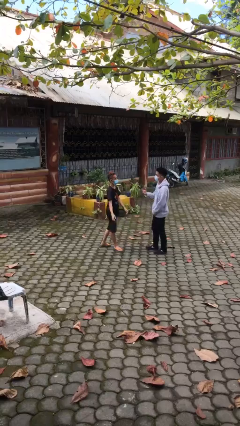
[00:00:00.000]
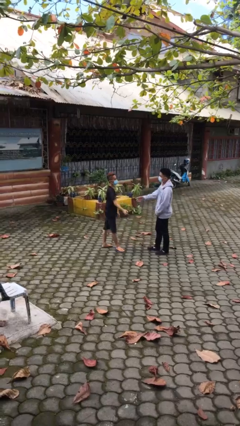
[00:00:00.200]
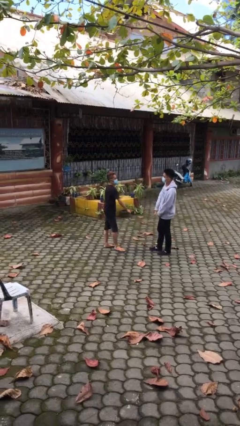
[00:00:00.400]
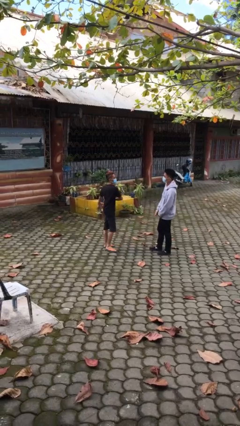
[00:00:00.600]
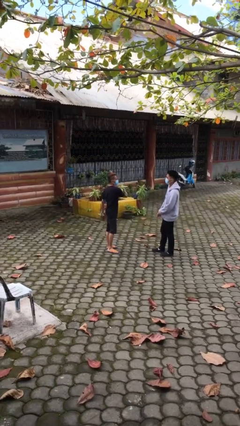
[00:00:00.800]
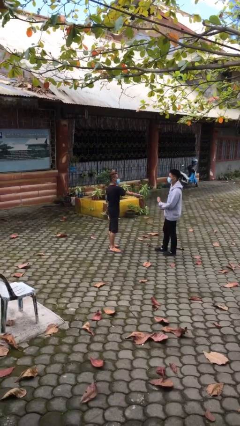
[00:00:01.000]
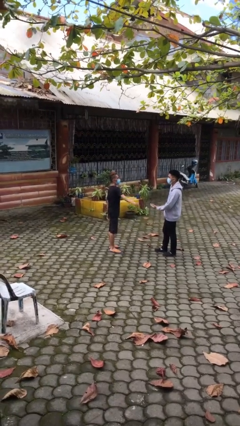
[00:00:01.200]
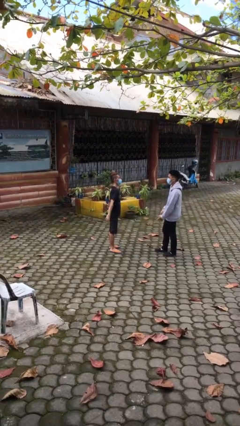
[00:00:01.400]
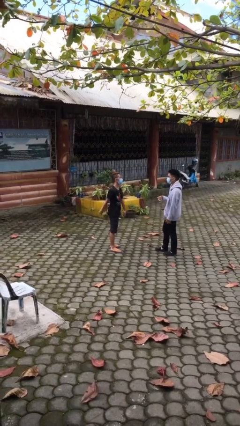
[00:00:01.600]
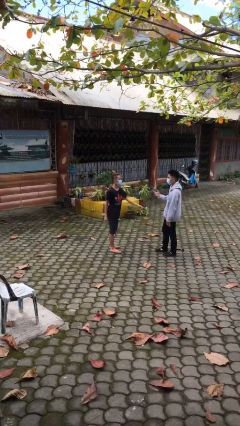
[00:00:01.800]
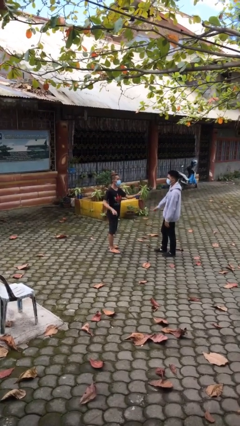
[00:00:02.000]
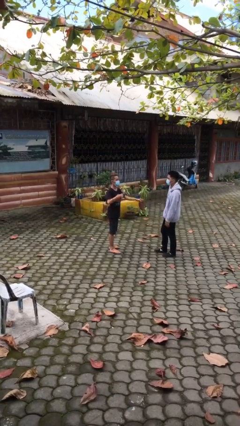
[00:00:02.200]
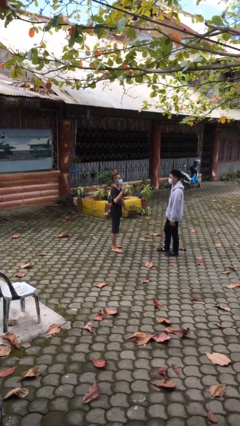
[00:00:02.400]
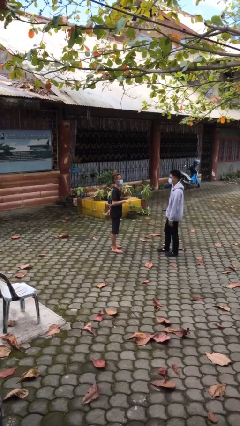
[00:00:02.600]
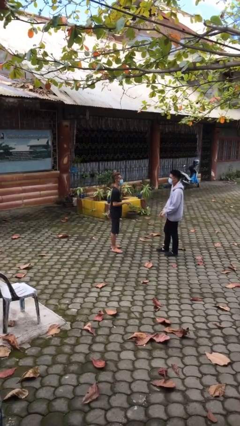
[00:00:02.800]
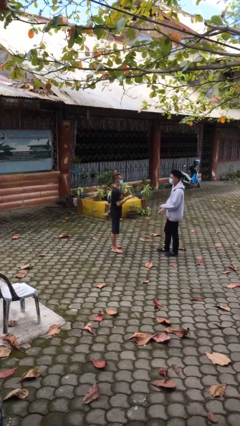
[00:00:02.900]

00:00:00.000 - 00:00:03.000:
person talks to person

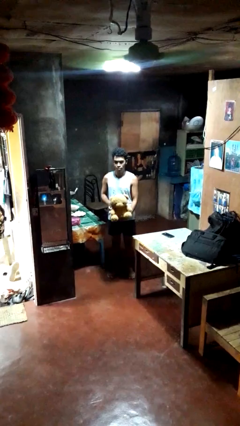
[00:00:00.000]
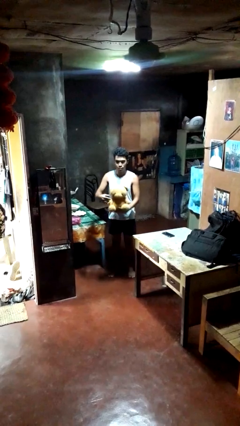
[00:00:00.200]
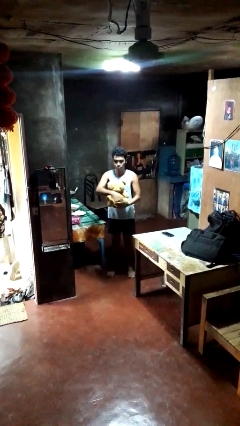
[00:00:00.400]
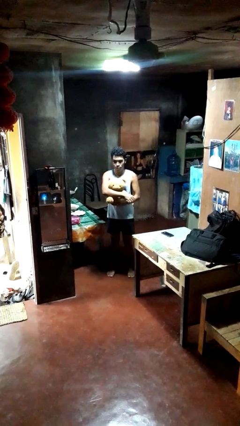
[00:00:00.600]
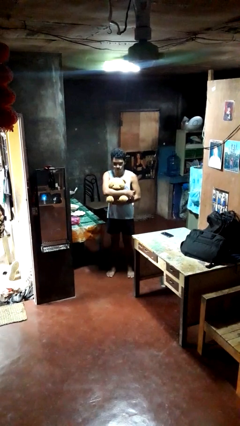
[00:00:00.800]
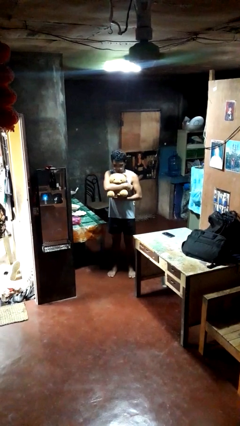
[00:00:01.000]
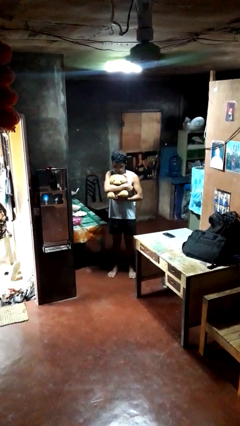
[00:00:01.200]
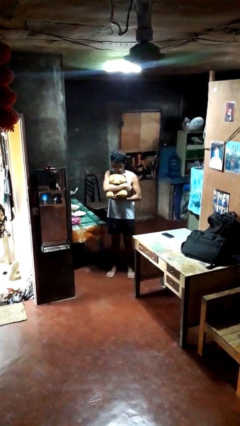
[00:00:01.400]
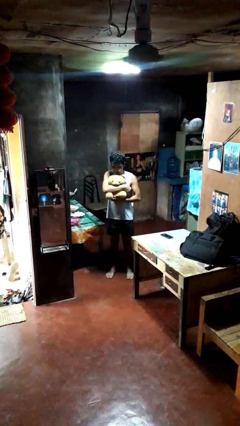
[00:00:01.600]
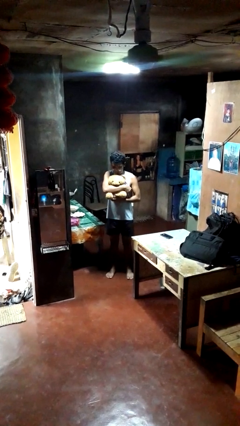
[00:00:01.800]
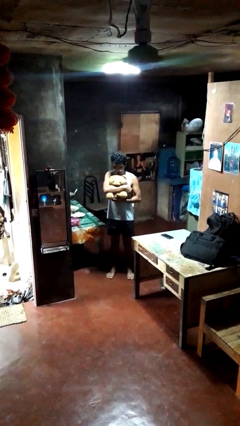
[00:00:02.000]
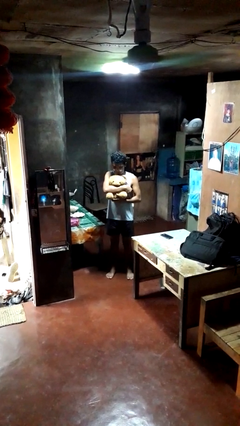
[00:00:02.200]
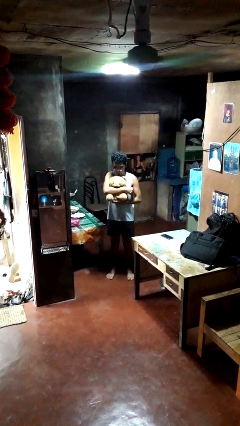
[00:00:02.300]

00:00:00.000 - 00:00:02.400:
person hugs stuffed animal

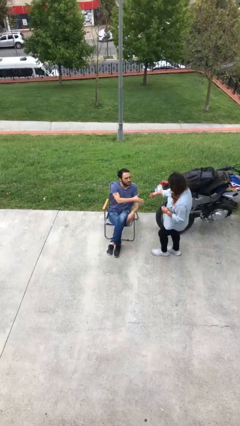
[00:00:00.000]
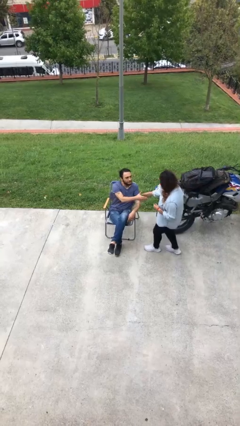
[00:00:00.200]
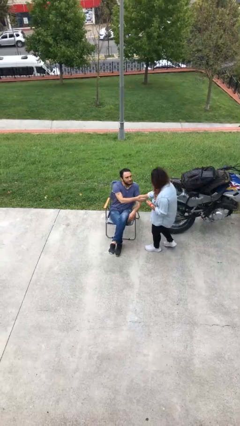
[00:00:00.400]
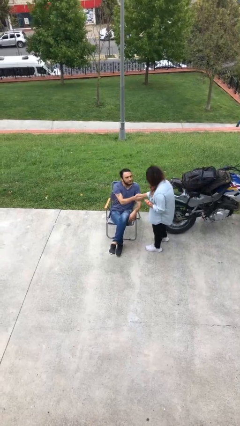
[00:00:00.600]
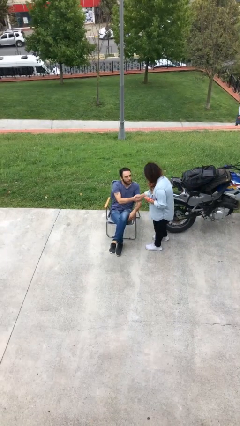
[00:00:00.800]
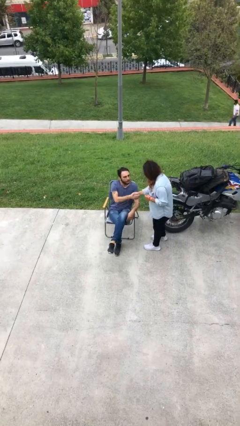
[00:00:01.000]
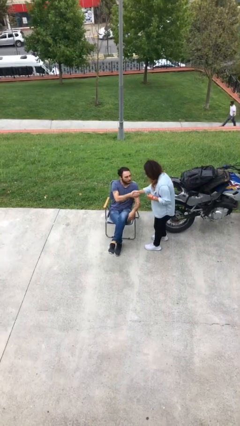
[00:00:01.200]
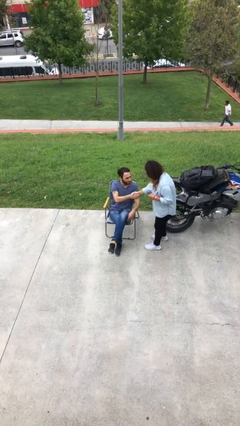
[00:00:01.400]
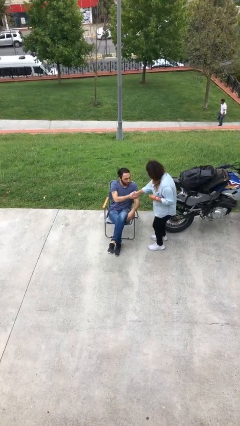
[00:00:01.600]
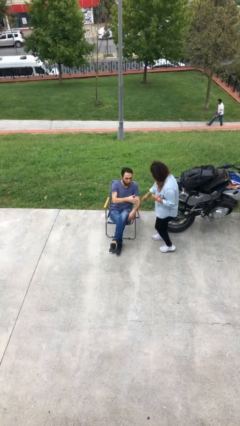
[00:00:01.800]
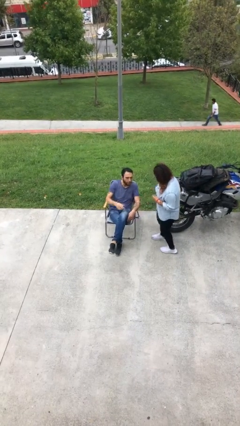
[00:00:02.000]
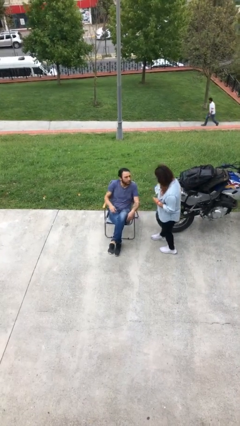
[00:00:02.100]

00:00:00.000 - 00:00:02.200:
person shakes hand

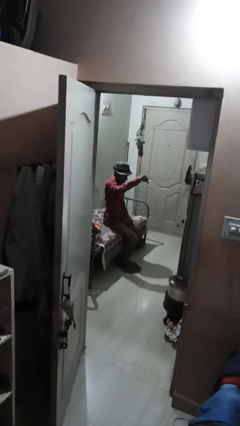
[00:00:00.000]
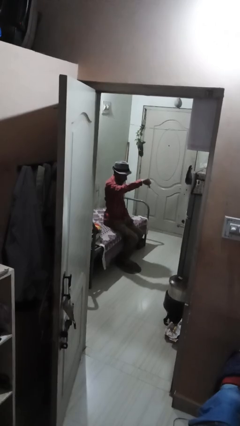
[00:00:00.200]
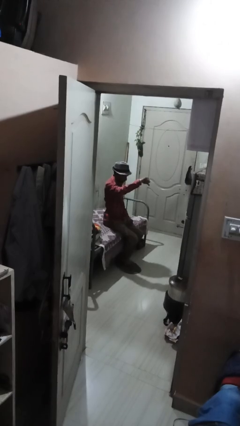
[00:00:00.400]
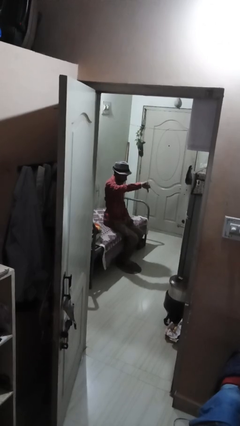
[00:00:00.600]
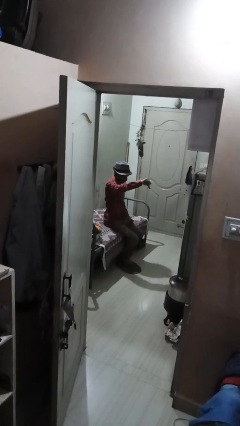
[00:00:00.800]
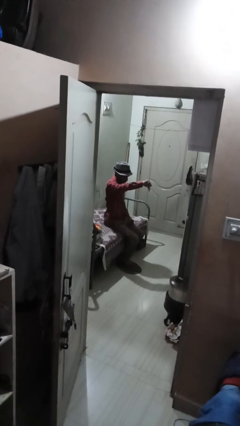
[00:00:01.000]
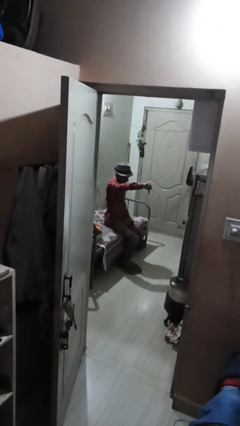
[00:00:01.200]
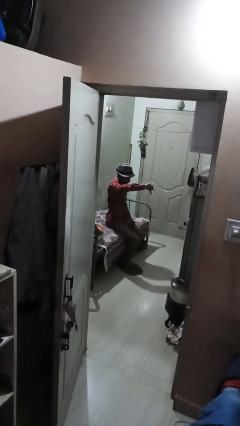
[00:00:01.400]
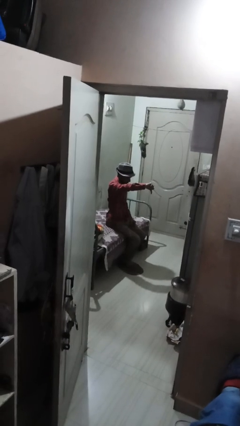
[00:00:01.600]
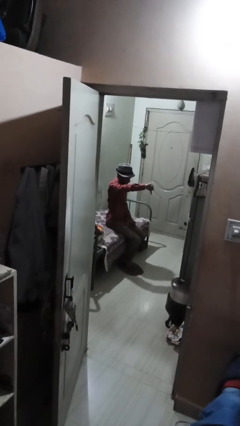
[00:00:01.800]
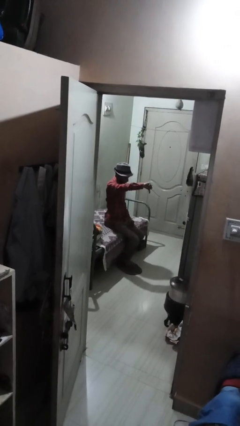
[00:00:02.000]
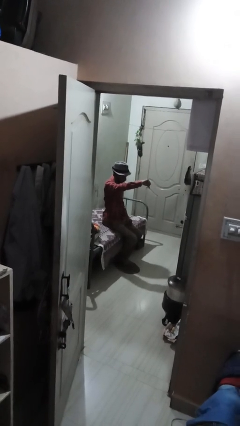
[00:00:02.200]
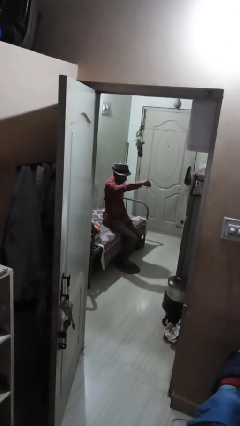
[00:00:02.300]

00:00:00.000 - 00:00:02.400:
person gestures thumbs down

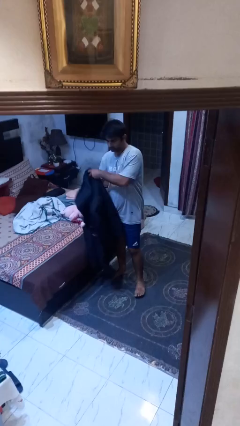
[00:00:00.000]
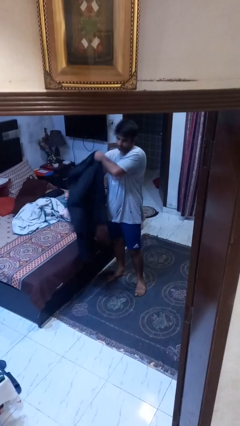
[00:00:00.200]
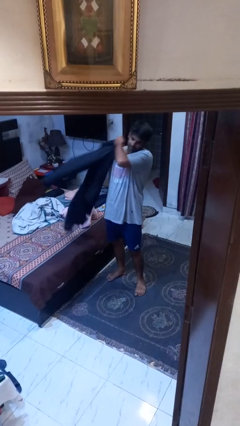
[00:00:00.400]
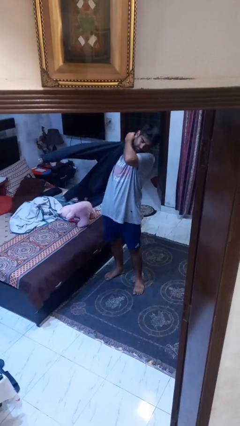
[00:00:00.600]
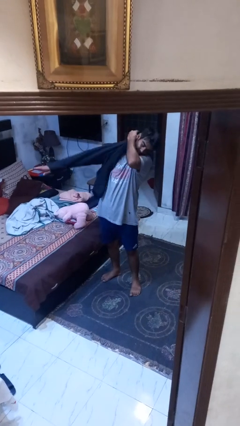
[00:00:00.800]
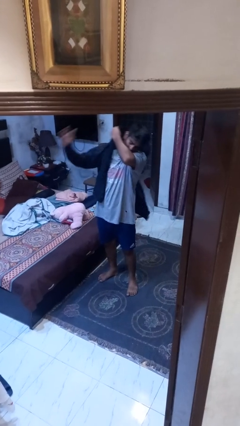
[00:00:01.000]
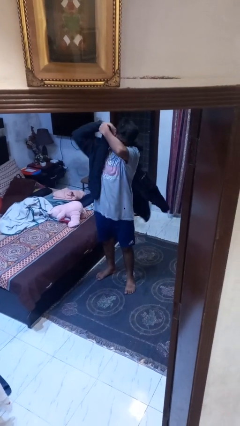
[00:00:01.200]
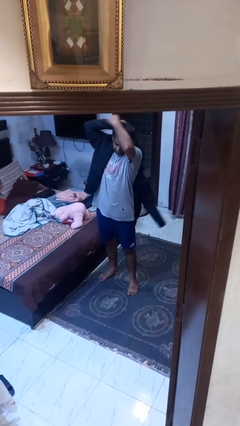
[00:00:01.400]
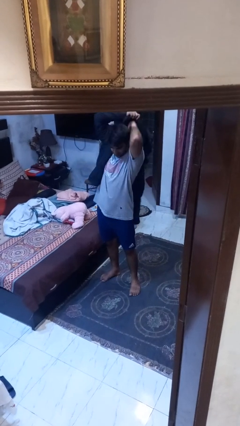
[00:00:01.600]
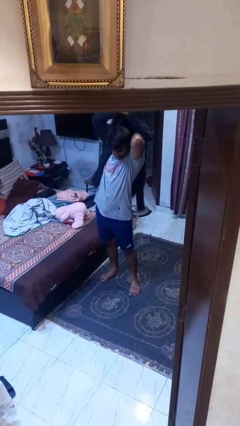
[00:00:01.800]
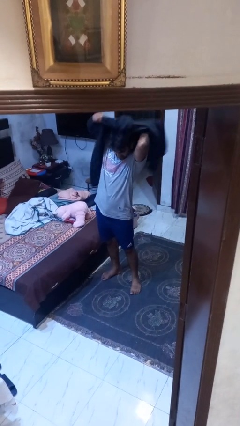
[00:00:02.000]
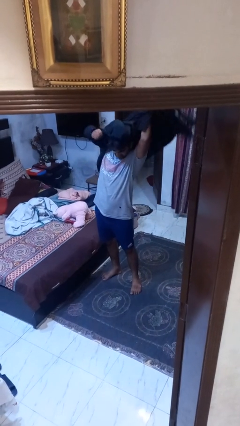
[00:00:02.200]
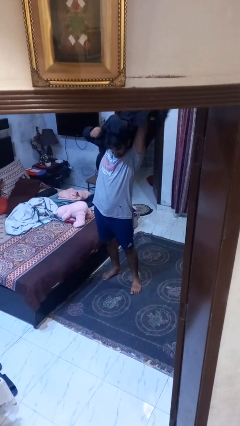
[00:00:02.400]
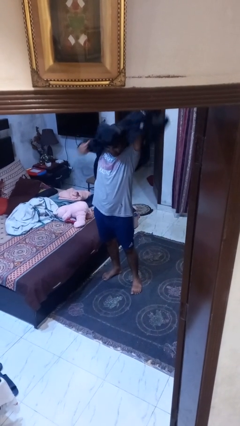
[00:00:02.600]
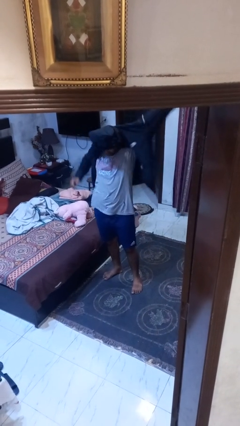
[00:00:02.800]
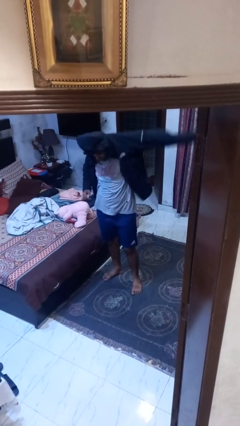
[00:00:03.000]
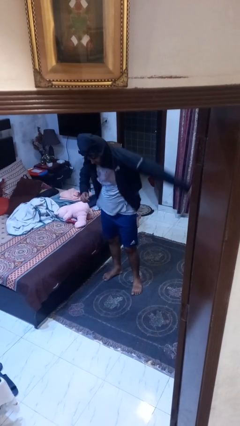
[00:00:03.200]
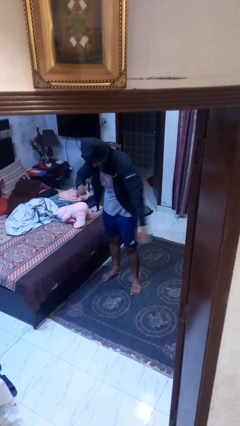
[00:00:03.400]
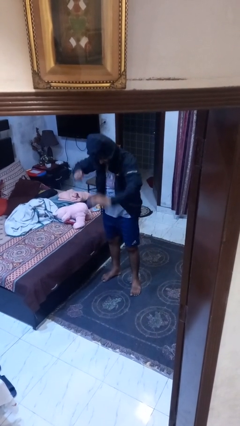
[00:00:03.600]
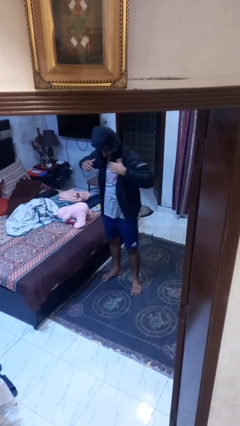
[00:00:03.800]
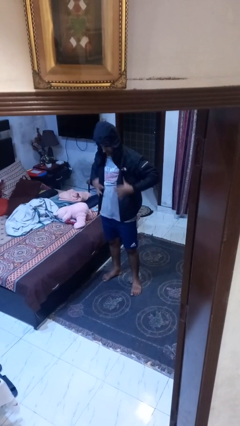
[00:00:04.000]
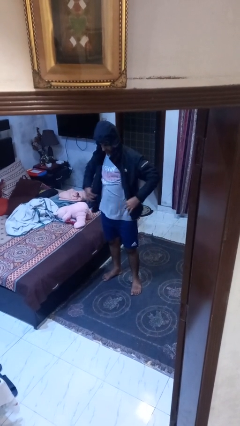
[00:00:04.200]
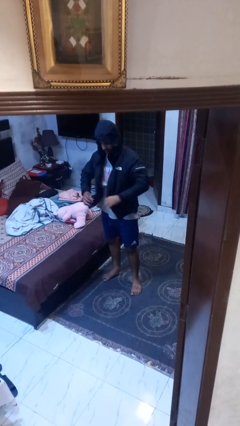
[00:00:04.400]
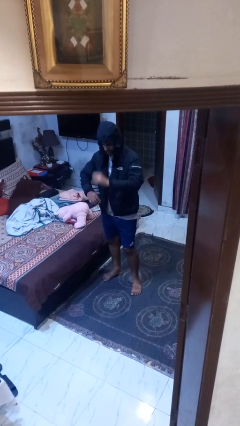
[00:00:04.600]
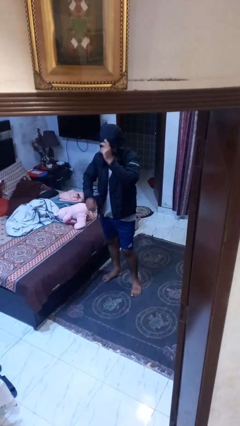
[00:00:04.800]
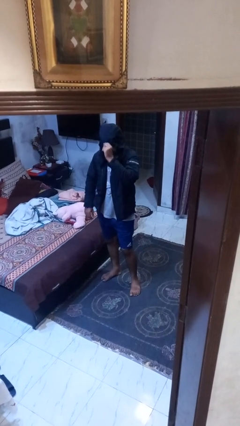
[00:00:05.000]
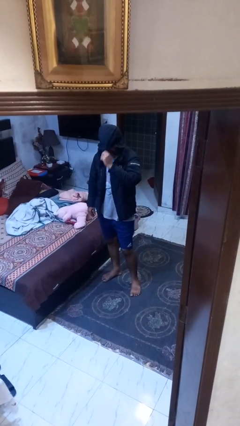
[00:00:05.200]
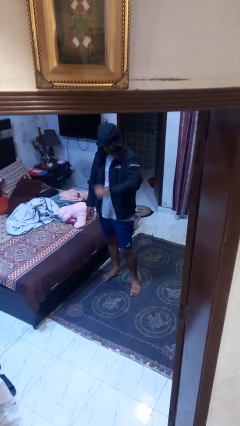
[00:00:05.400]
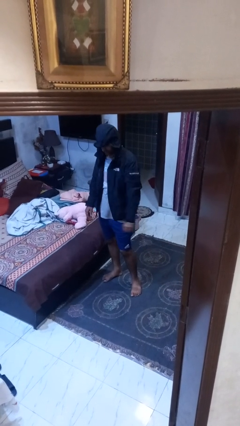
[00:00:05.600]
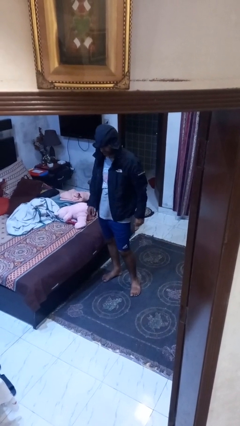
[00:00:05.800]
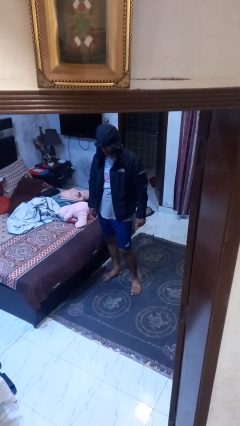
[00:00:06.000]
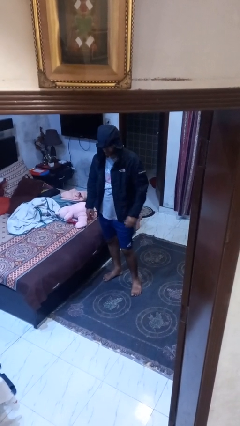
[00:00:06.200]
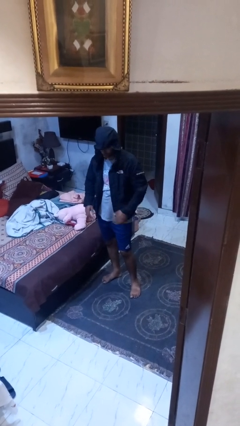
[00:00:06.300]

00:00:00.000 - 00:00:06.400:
person puts on hoodie

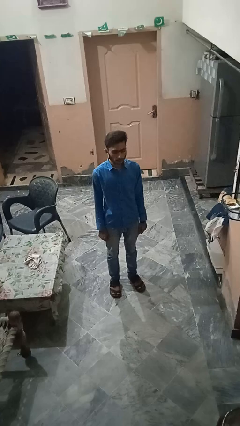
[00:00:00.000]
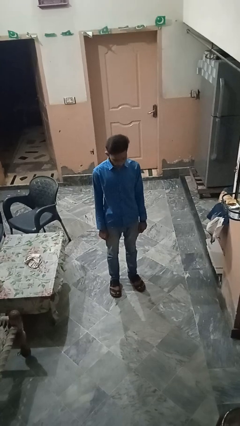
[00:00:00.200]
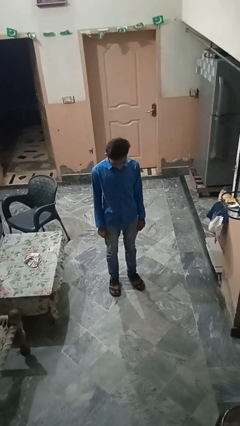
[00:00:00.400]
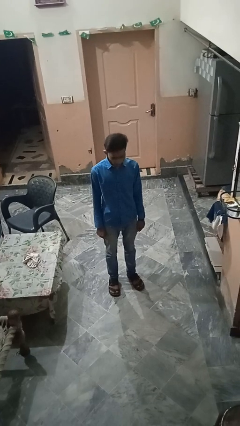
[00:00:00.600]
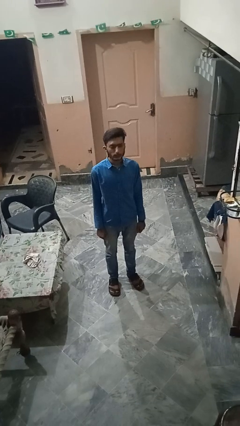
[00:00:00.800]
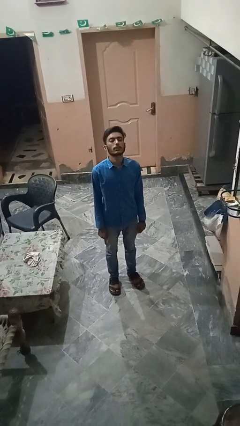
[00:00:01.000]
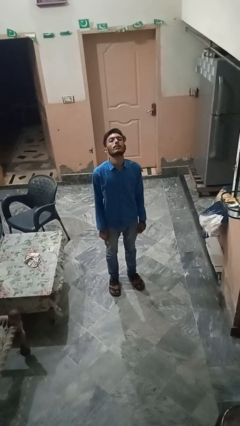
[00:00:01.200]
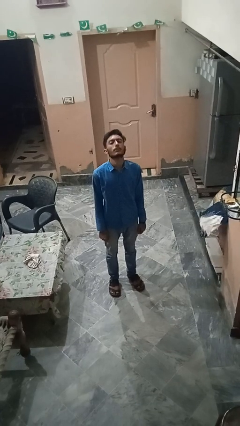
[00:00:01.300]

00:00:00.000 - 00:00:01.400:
person nods head
